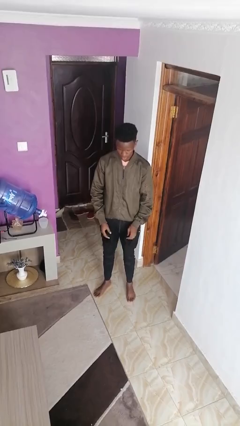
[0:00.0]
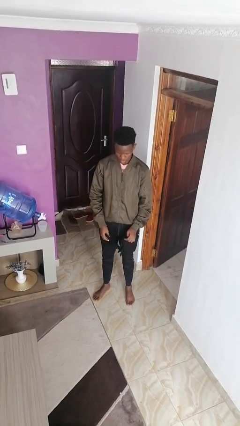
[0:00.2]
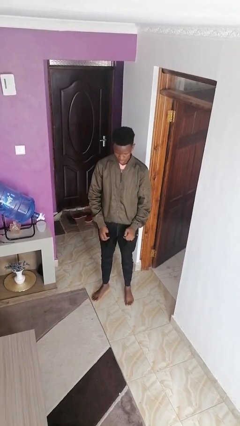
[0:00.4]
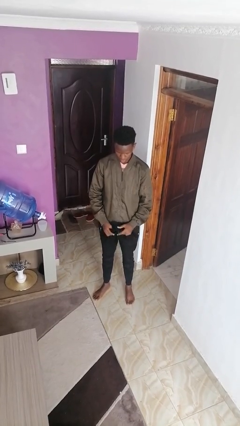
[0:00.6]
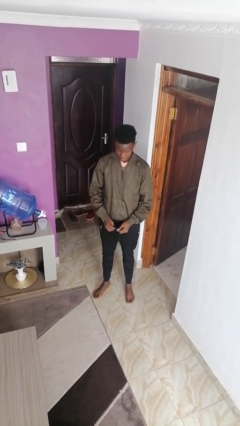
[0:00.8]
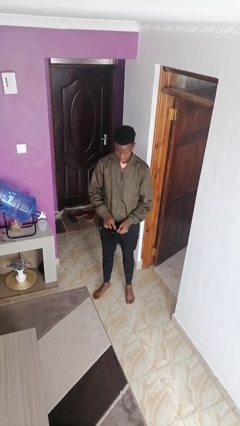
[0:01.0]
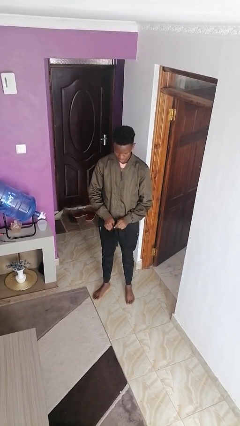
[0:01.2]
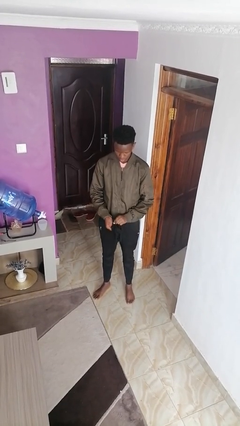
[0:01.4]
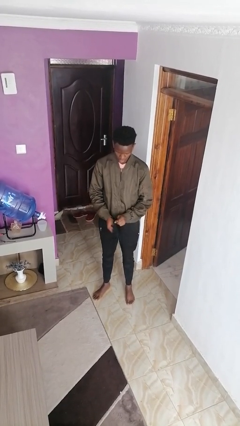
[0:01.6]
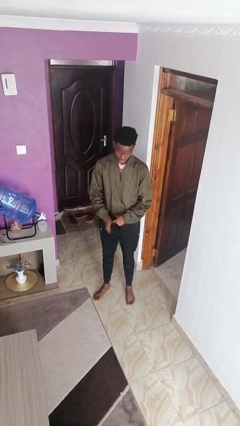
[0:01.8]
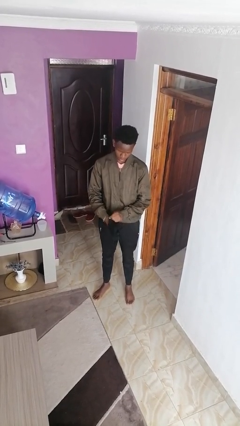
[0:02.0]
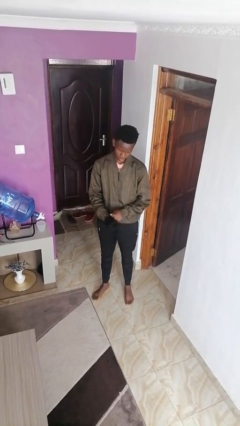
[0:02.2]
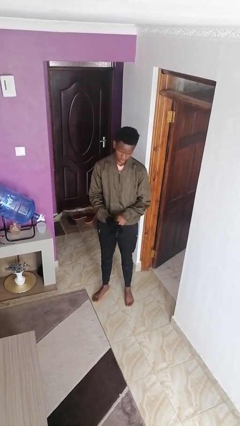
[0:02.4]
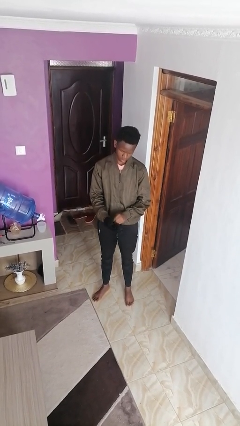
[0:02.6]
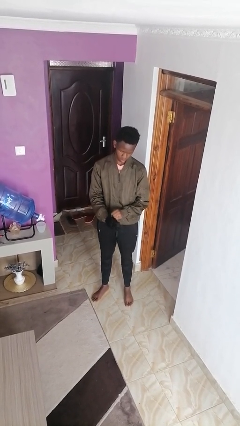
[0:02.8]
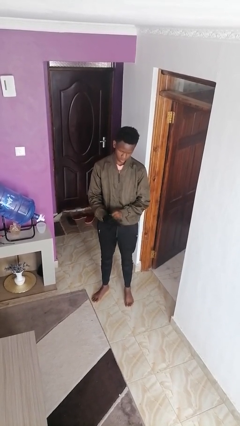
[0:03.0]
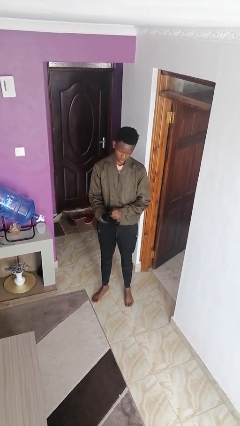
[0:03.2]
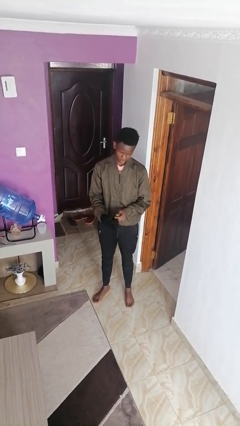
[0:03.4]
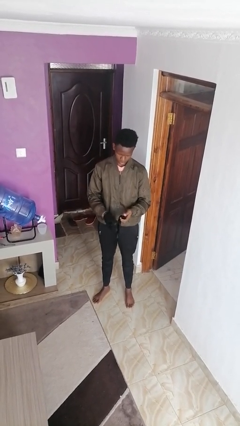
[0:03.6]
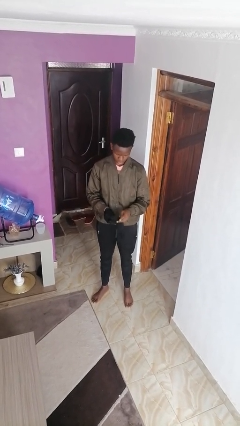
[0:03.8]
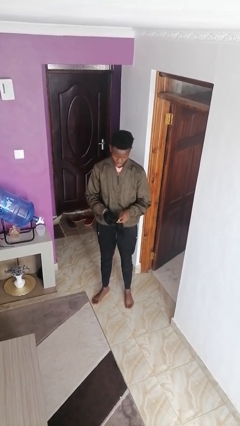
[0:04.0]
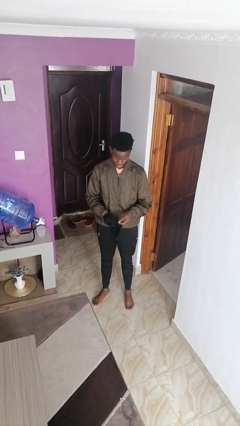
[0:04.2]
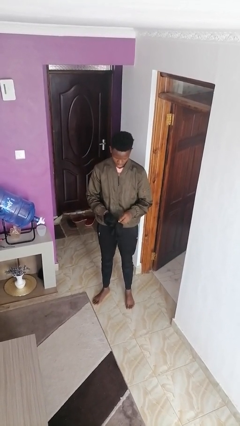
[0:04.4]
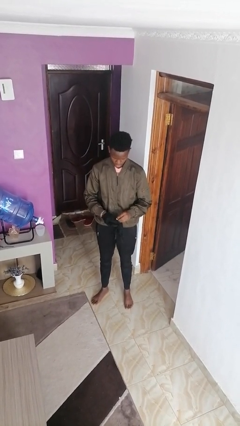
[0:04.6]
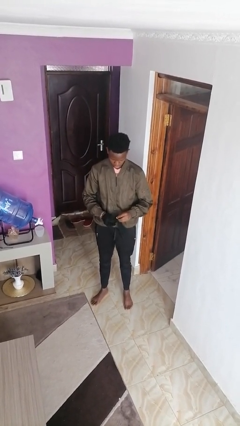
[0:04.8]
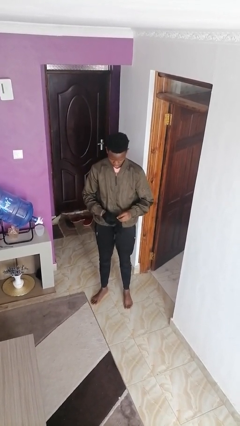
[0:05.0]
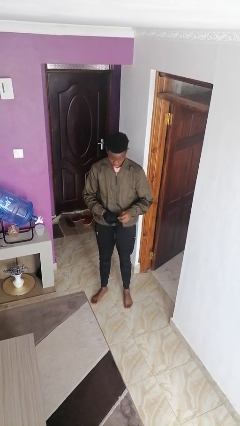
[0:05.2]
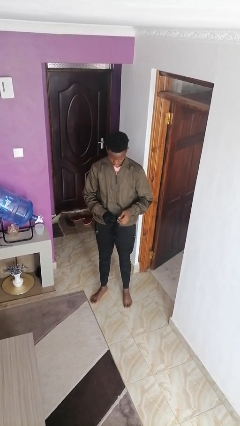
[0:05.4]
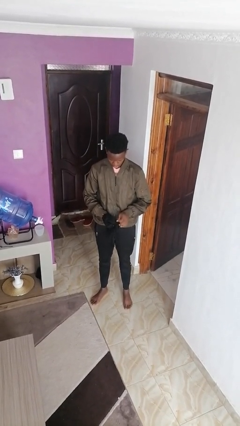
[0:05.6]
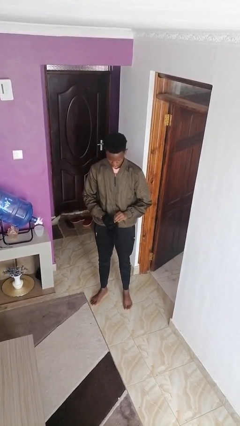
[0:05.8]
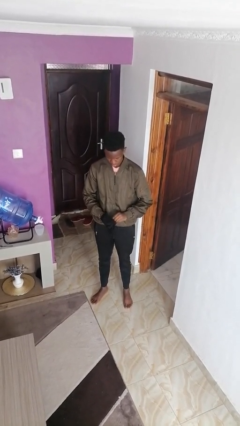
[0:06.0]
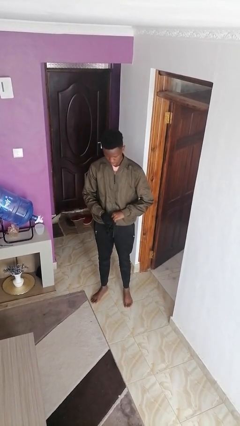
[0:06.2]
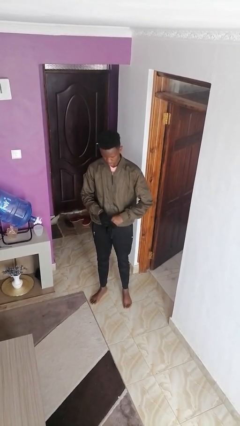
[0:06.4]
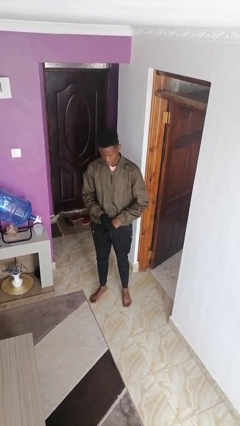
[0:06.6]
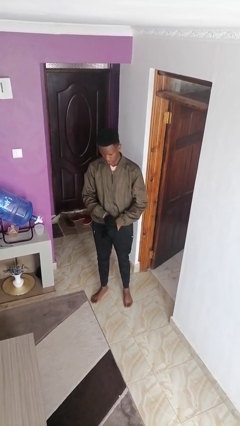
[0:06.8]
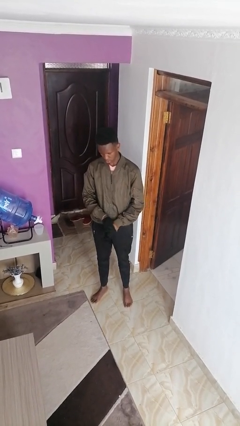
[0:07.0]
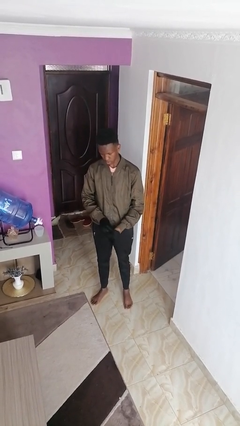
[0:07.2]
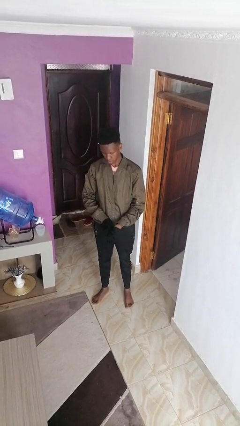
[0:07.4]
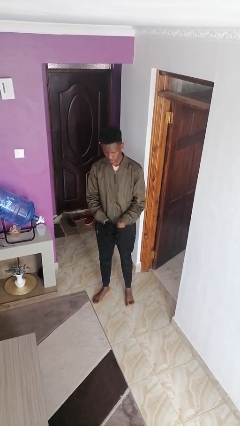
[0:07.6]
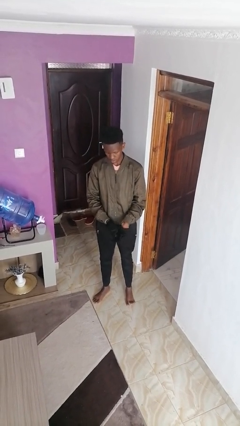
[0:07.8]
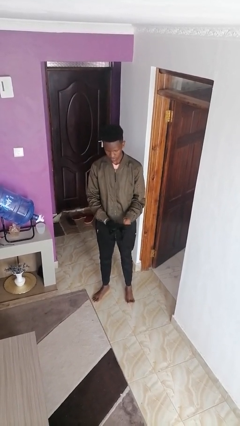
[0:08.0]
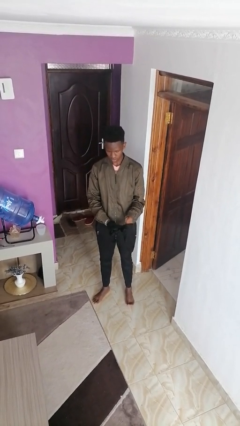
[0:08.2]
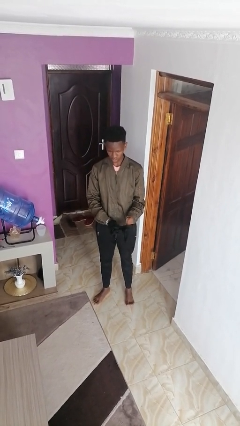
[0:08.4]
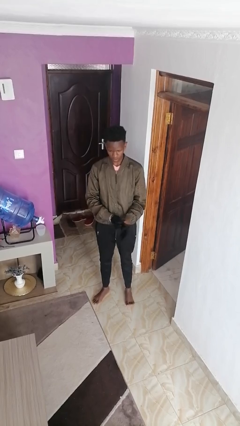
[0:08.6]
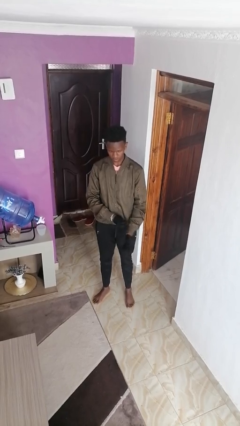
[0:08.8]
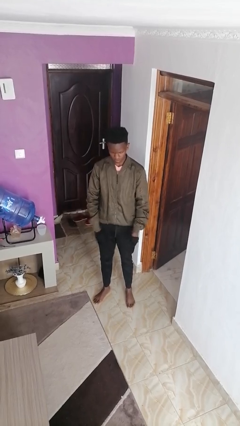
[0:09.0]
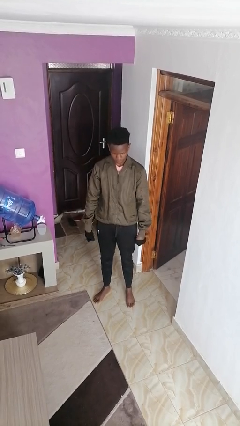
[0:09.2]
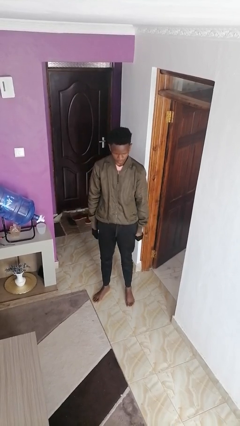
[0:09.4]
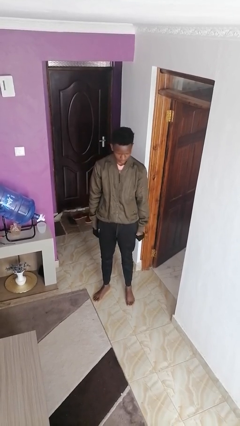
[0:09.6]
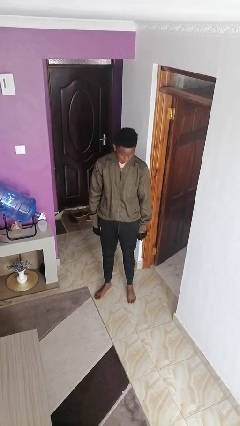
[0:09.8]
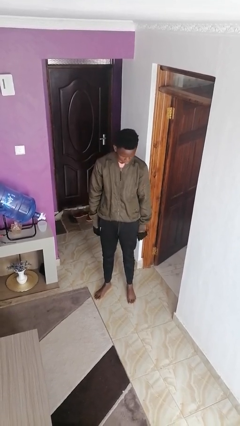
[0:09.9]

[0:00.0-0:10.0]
person puts on gloves

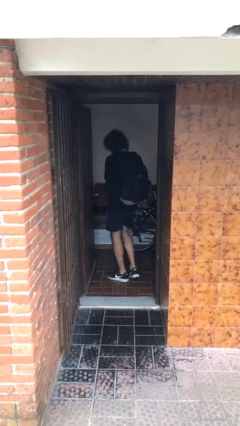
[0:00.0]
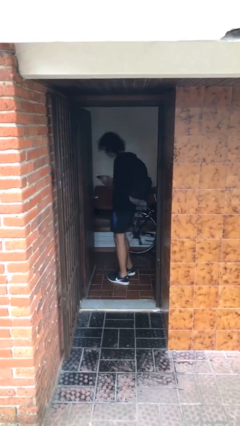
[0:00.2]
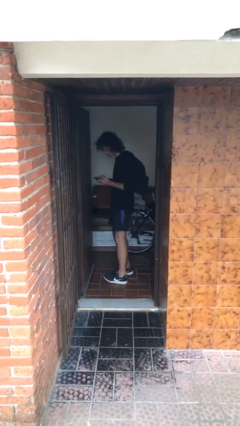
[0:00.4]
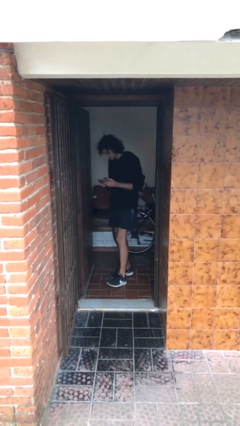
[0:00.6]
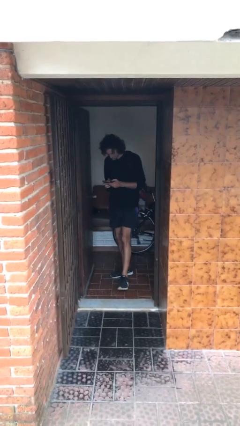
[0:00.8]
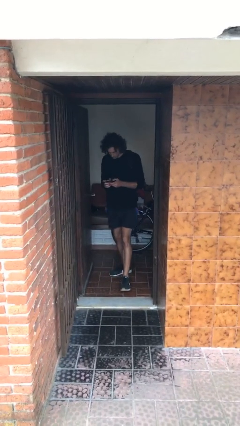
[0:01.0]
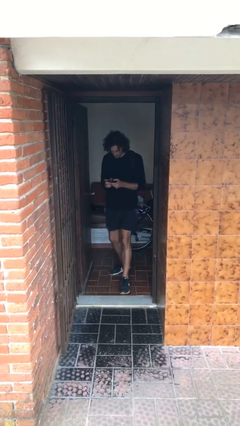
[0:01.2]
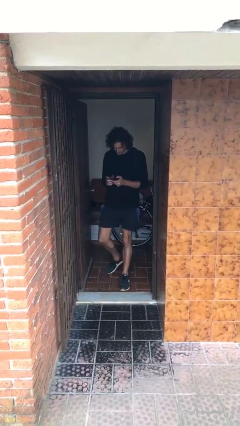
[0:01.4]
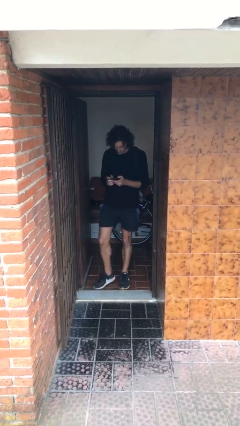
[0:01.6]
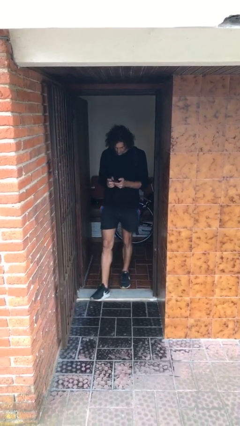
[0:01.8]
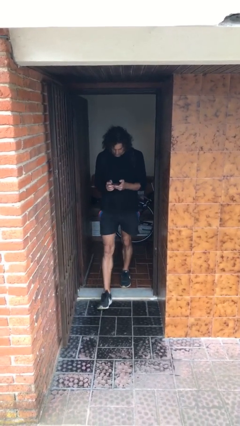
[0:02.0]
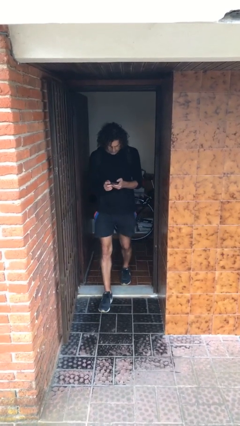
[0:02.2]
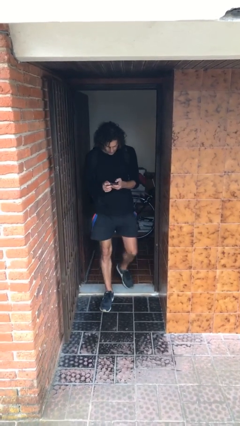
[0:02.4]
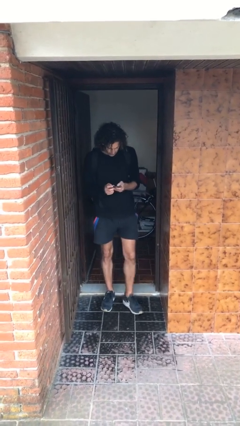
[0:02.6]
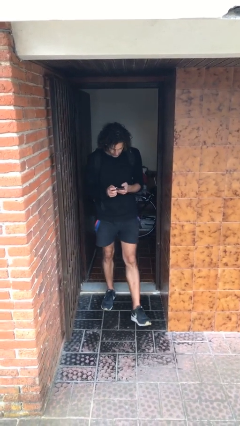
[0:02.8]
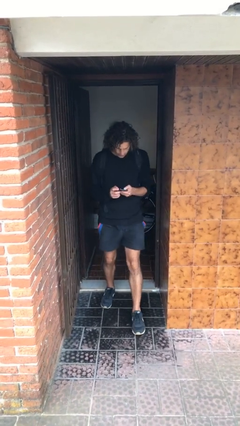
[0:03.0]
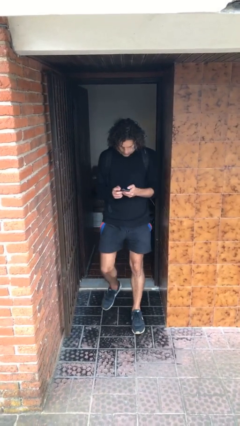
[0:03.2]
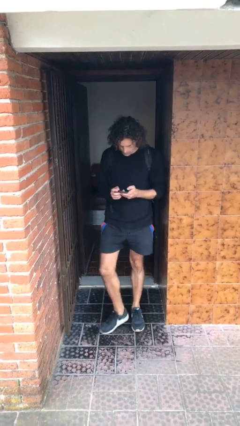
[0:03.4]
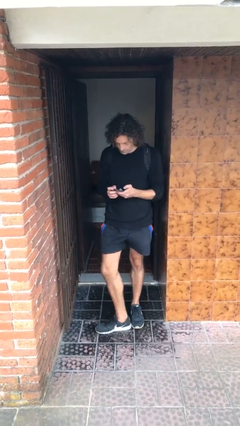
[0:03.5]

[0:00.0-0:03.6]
person enters scene through structure

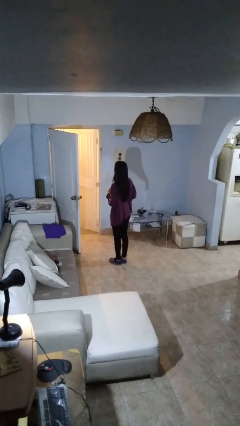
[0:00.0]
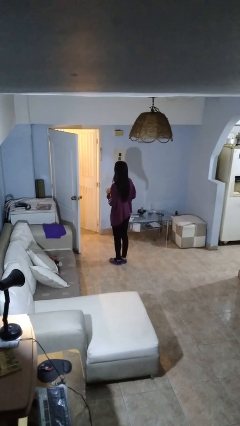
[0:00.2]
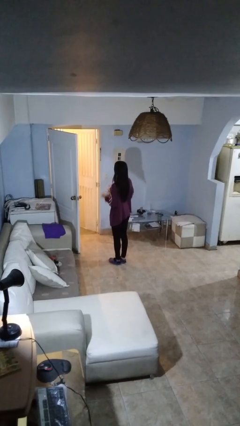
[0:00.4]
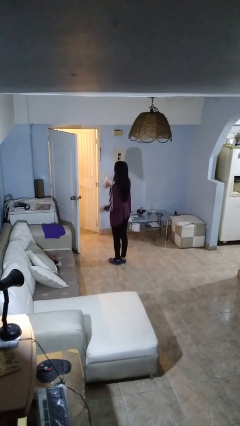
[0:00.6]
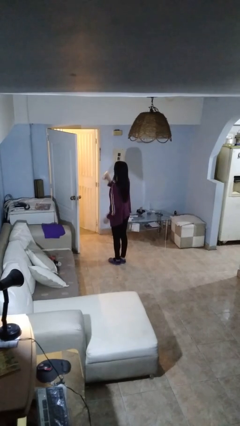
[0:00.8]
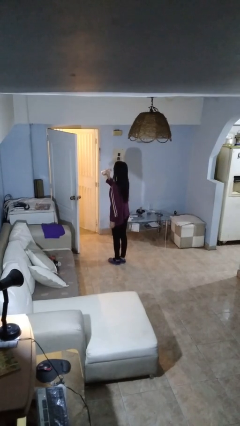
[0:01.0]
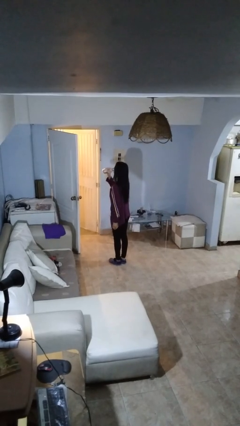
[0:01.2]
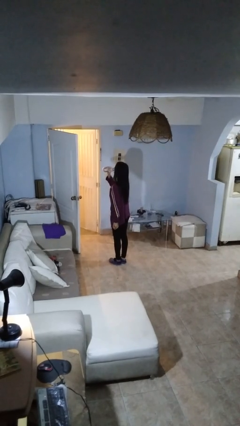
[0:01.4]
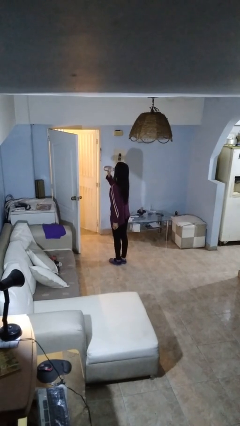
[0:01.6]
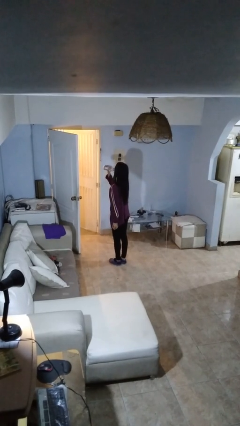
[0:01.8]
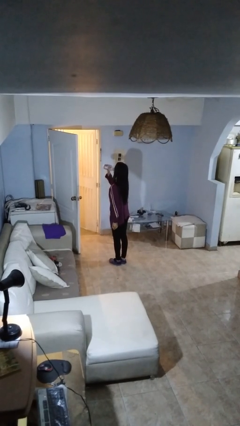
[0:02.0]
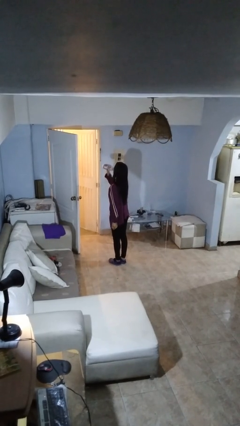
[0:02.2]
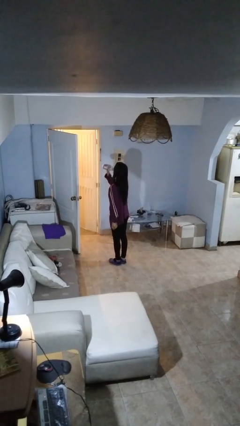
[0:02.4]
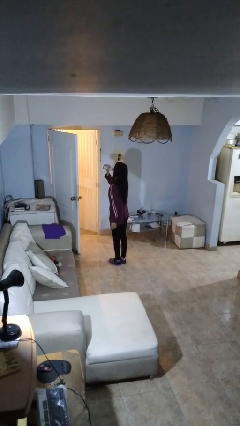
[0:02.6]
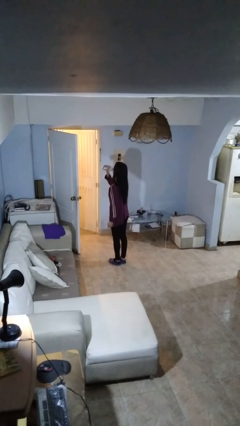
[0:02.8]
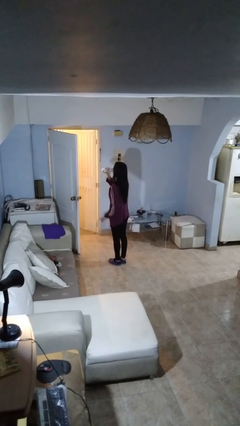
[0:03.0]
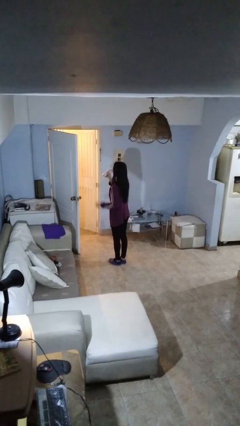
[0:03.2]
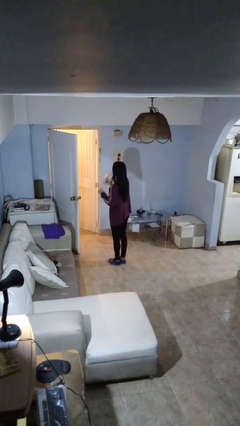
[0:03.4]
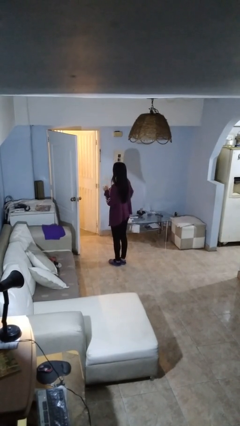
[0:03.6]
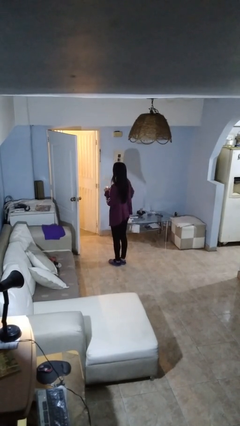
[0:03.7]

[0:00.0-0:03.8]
person drinks from bottle

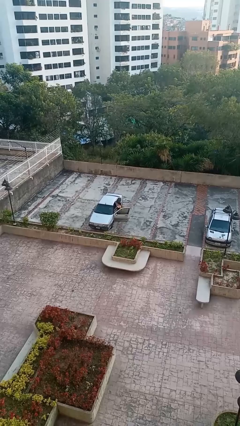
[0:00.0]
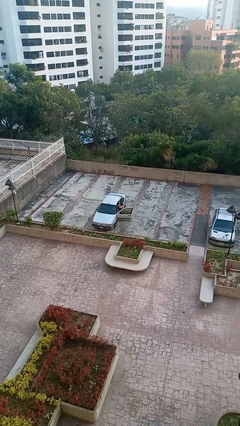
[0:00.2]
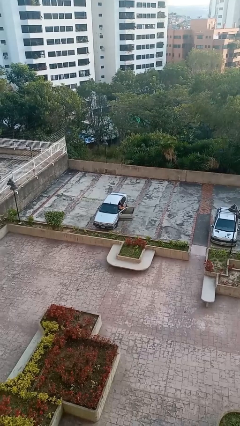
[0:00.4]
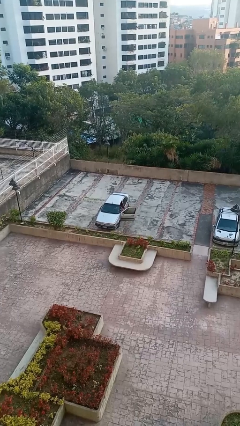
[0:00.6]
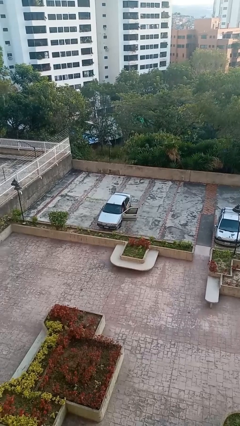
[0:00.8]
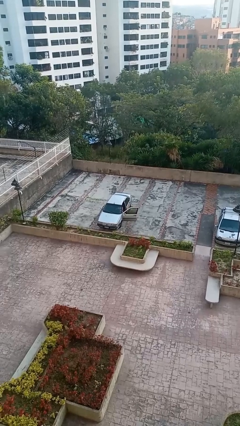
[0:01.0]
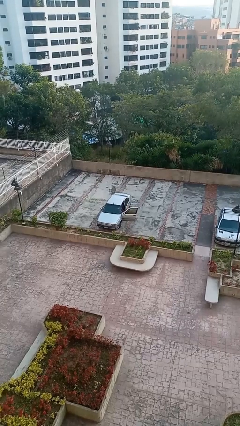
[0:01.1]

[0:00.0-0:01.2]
person enters car
